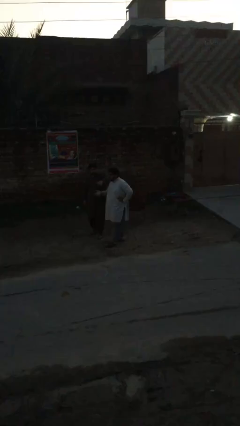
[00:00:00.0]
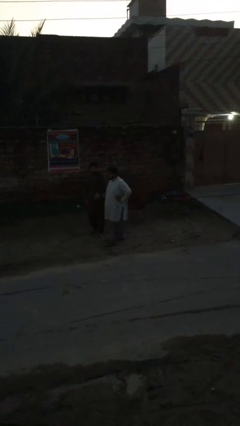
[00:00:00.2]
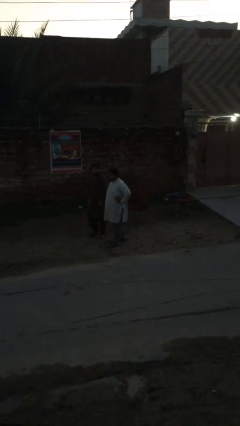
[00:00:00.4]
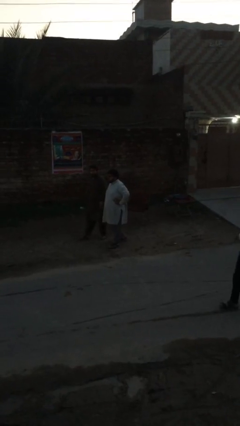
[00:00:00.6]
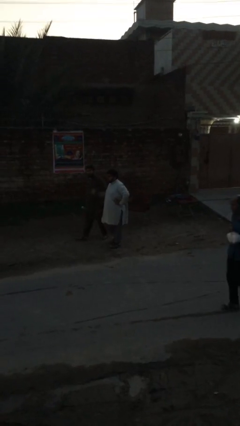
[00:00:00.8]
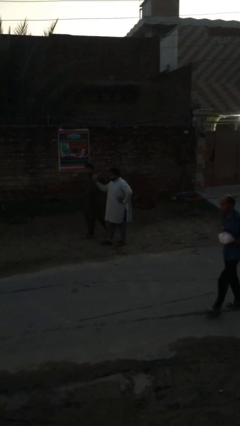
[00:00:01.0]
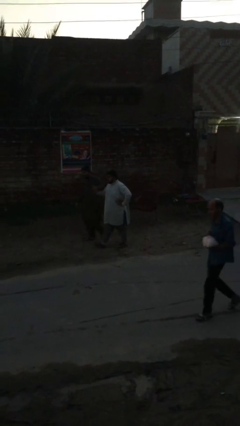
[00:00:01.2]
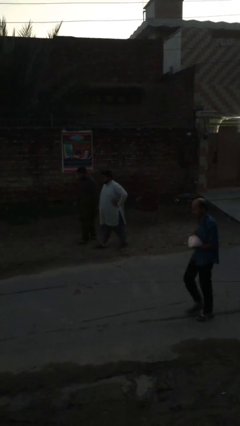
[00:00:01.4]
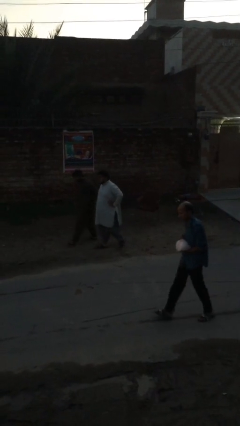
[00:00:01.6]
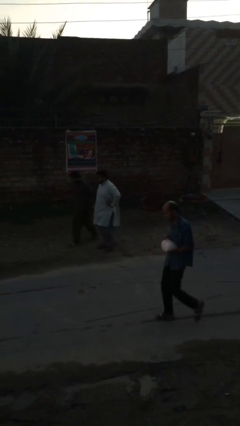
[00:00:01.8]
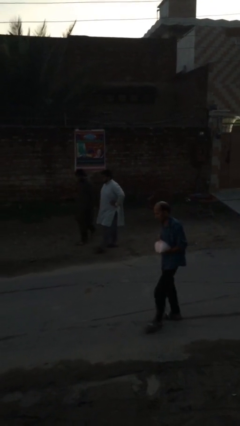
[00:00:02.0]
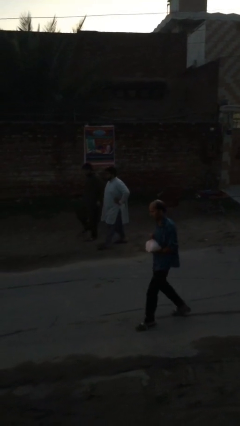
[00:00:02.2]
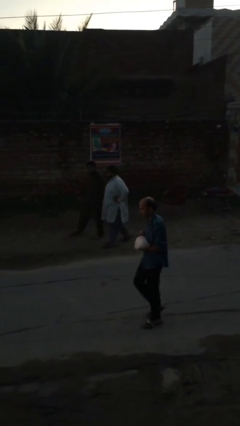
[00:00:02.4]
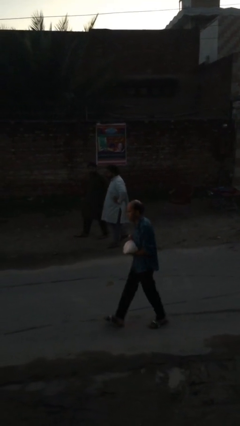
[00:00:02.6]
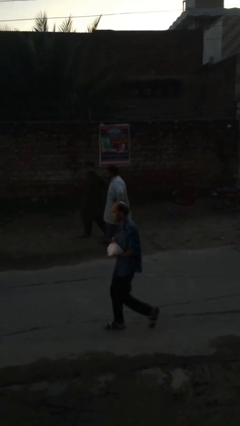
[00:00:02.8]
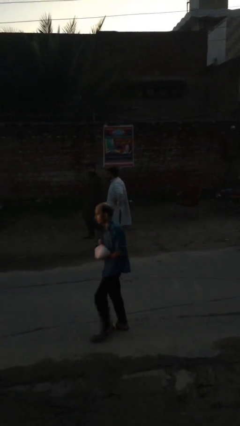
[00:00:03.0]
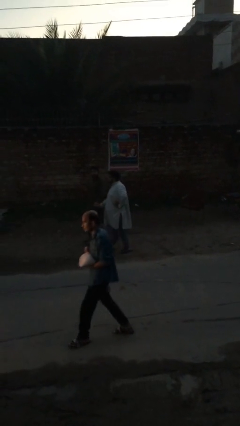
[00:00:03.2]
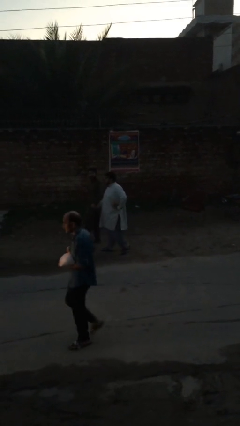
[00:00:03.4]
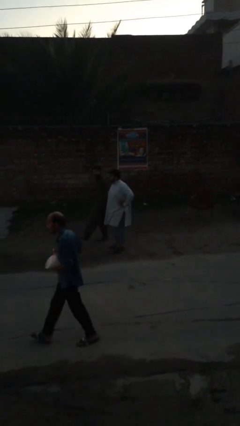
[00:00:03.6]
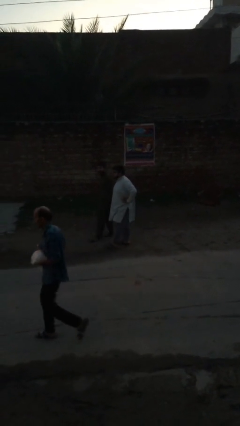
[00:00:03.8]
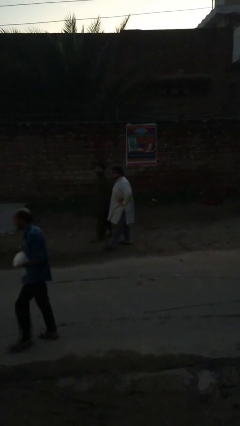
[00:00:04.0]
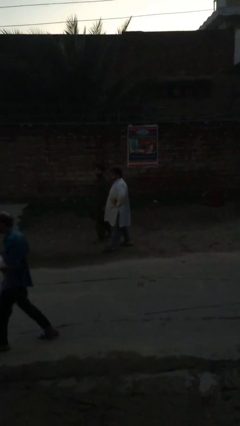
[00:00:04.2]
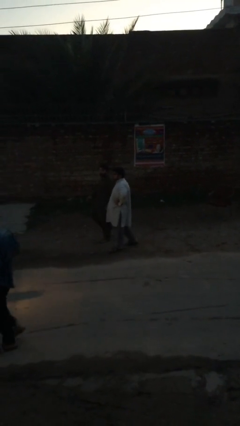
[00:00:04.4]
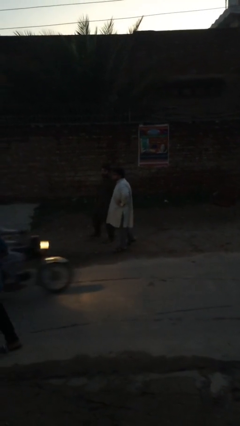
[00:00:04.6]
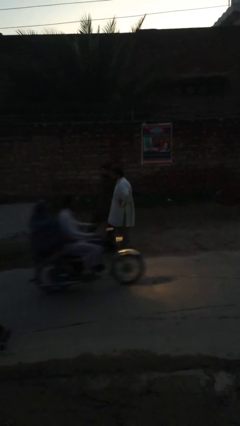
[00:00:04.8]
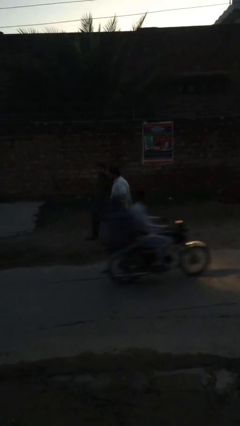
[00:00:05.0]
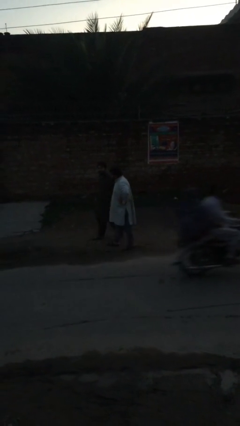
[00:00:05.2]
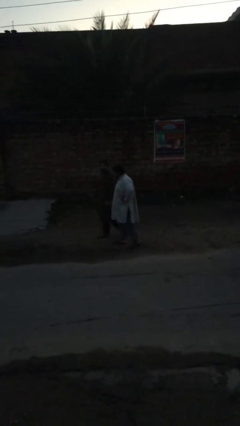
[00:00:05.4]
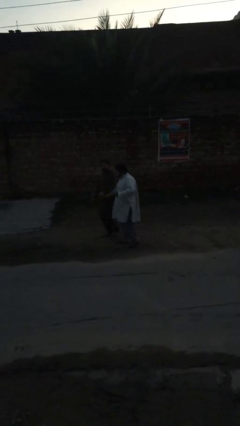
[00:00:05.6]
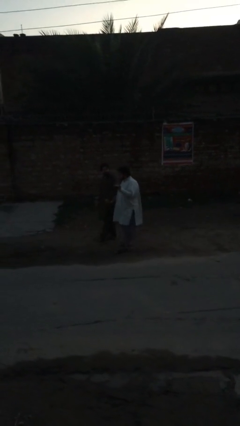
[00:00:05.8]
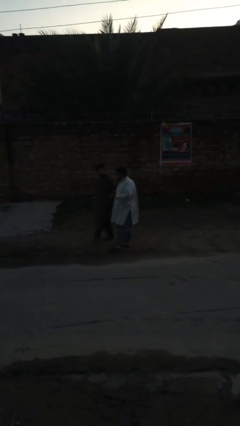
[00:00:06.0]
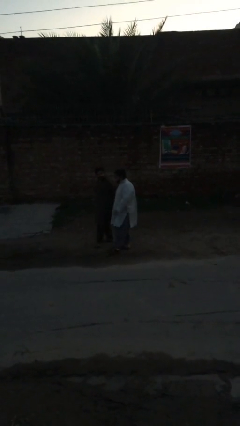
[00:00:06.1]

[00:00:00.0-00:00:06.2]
person holds hand

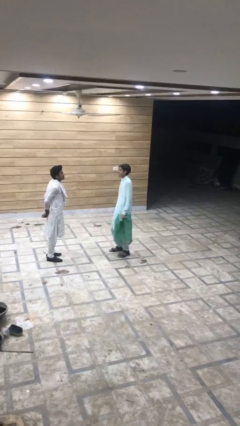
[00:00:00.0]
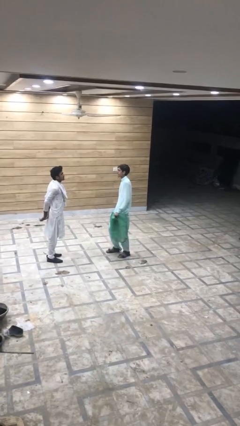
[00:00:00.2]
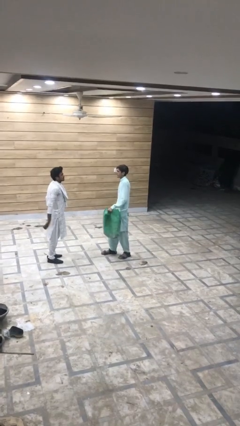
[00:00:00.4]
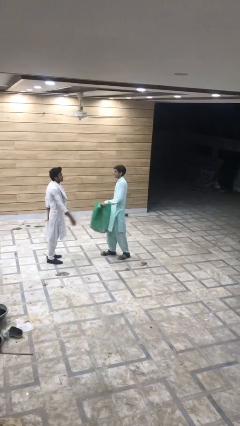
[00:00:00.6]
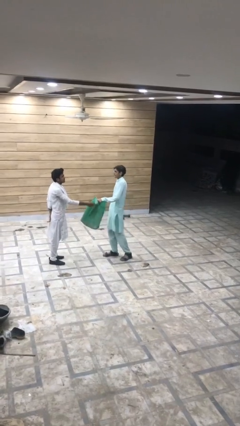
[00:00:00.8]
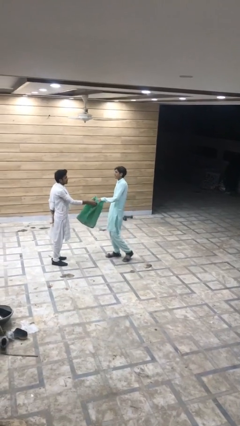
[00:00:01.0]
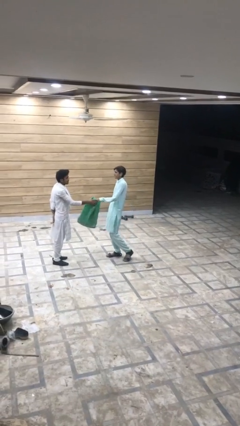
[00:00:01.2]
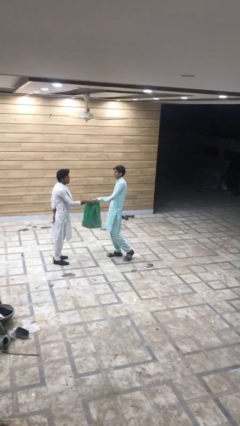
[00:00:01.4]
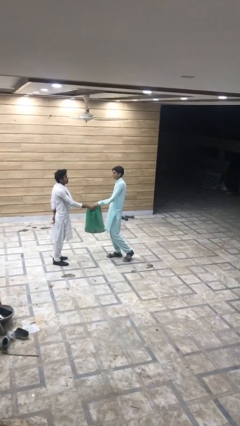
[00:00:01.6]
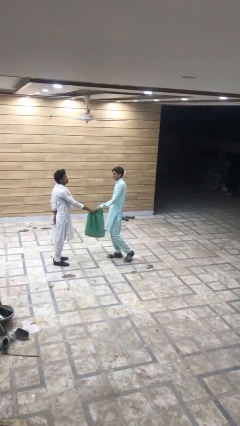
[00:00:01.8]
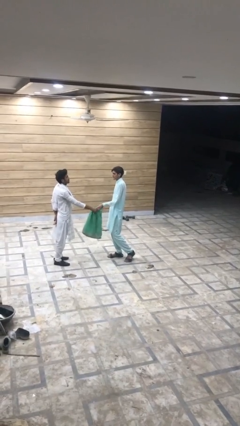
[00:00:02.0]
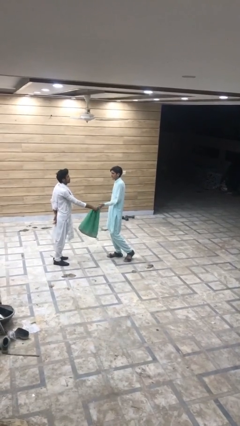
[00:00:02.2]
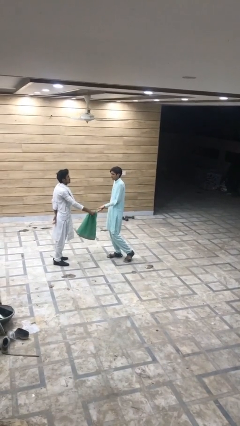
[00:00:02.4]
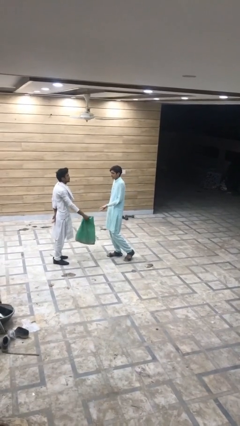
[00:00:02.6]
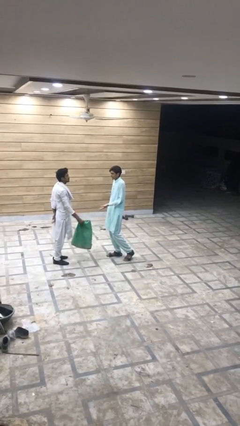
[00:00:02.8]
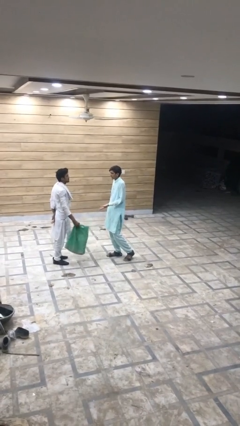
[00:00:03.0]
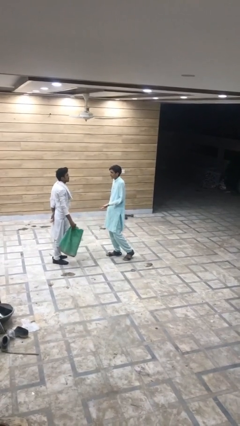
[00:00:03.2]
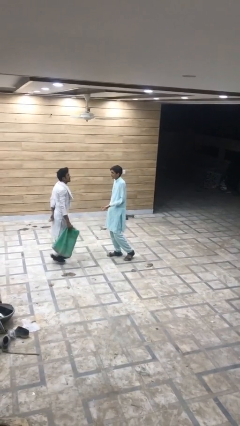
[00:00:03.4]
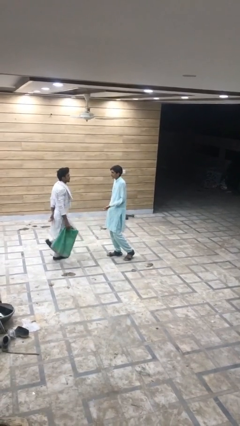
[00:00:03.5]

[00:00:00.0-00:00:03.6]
person transfers object to person

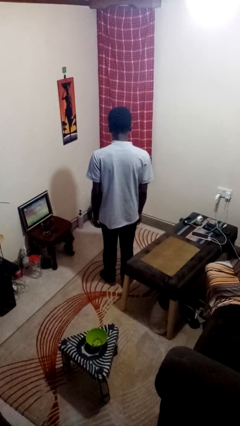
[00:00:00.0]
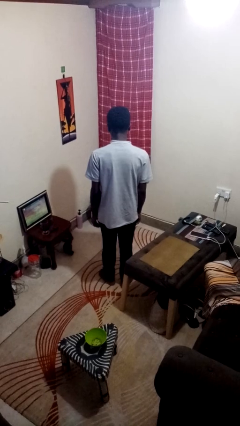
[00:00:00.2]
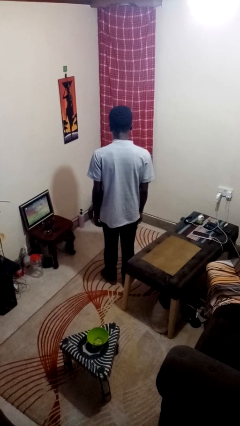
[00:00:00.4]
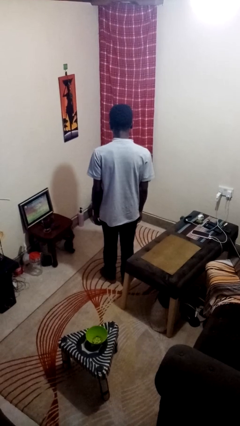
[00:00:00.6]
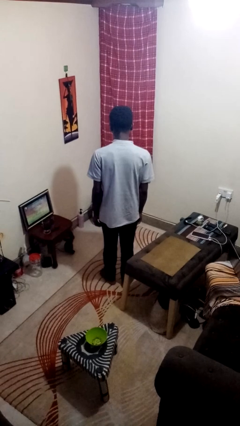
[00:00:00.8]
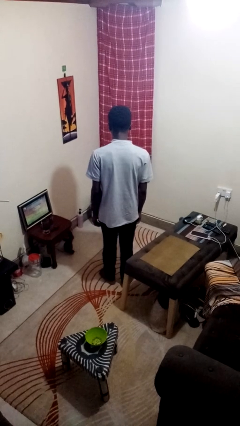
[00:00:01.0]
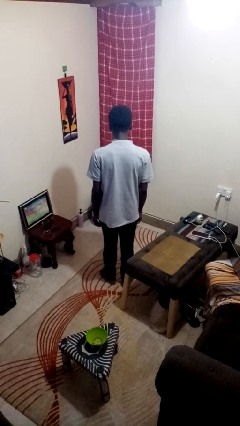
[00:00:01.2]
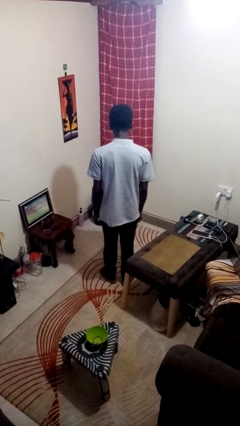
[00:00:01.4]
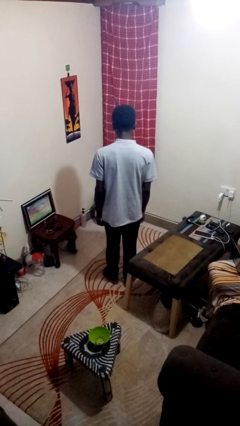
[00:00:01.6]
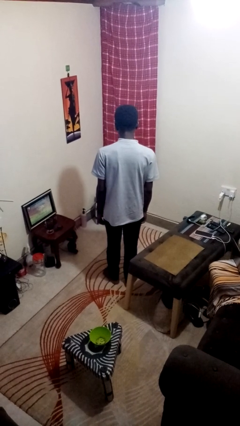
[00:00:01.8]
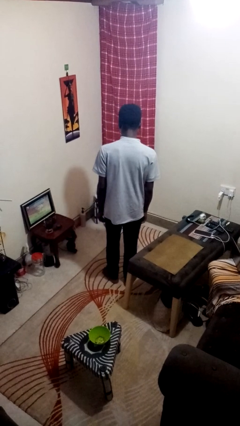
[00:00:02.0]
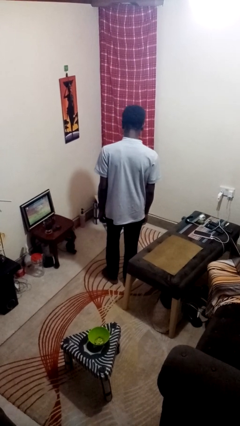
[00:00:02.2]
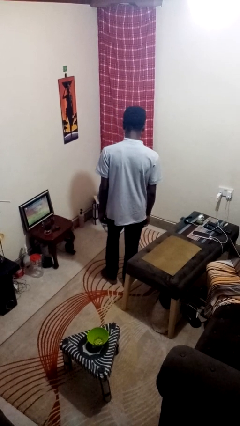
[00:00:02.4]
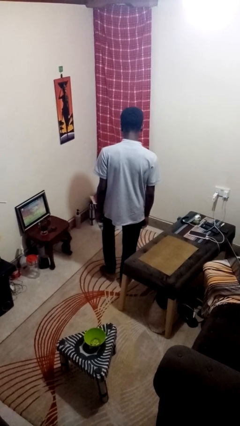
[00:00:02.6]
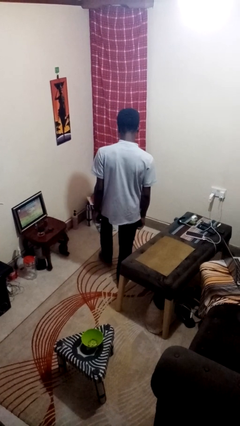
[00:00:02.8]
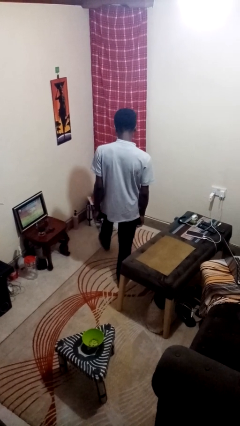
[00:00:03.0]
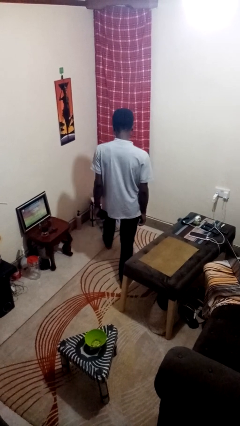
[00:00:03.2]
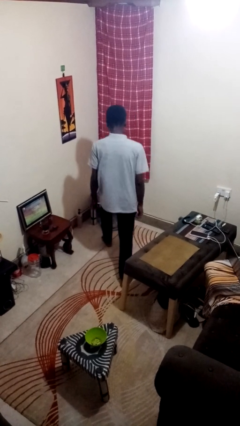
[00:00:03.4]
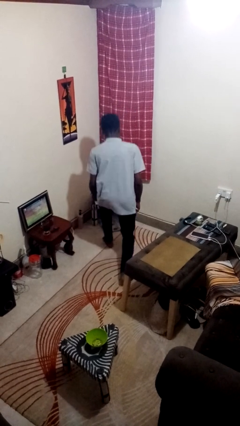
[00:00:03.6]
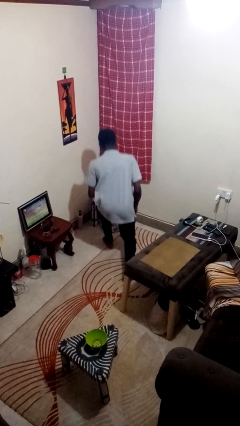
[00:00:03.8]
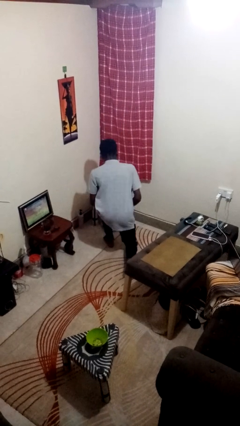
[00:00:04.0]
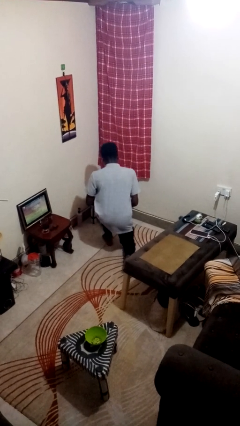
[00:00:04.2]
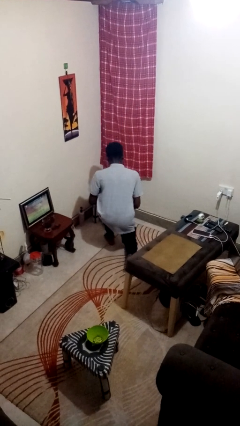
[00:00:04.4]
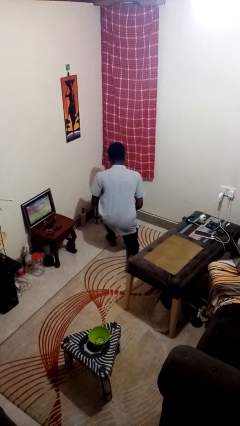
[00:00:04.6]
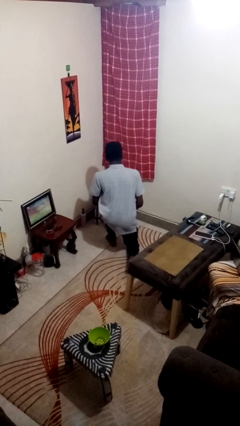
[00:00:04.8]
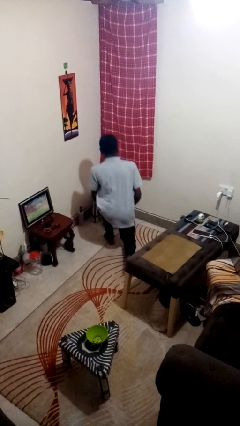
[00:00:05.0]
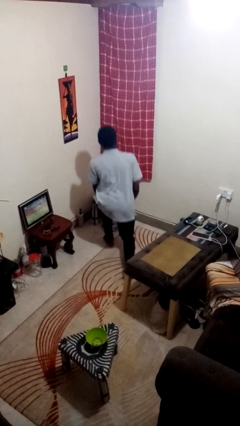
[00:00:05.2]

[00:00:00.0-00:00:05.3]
person exercises with lunges

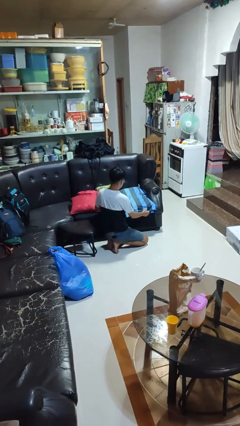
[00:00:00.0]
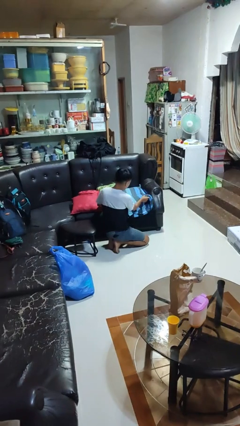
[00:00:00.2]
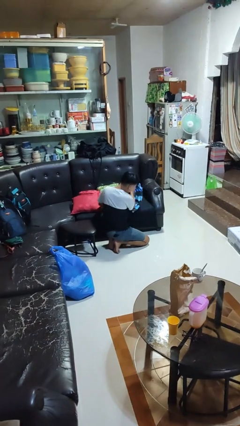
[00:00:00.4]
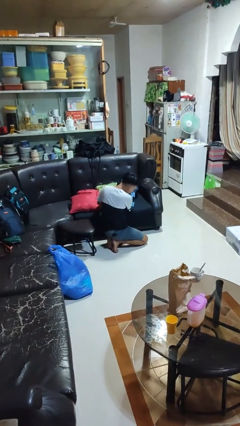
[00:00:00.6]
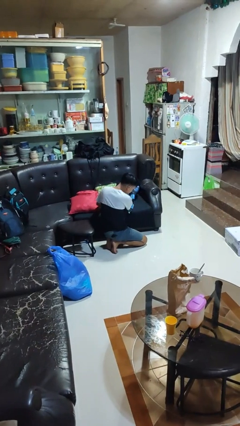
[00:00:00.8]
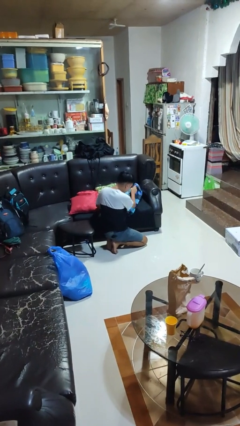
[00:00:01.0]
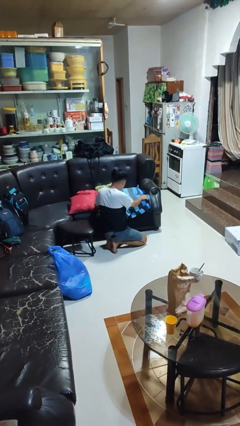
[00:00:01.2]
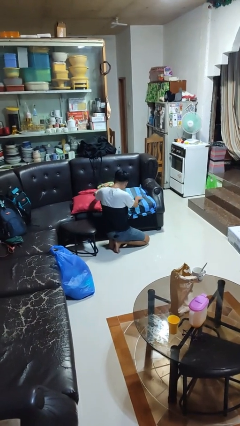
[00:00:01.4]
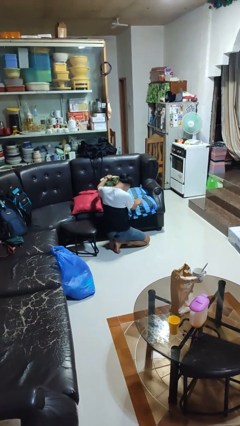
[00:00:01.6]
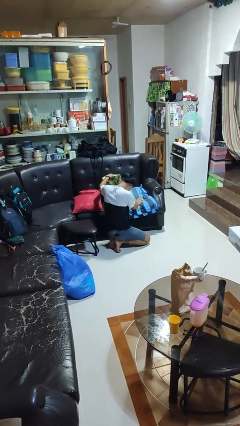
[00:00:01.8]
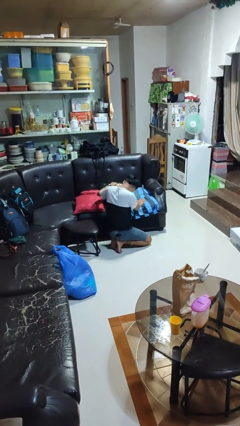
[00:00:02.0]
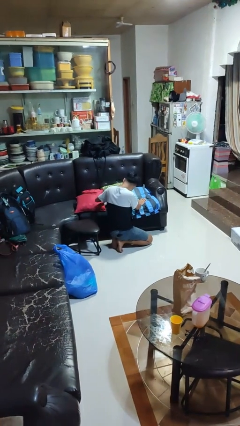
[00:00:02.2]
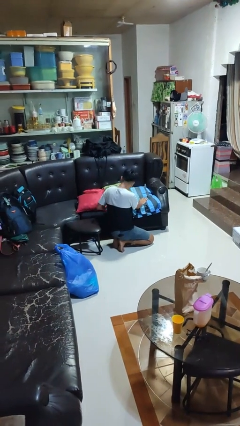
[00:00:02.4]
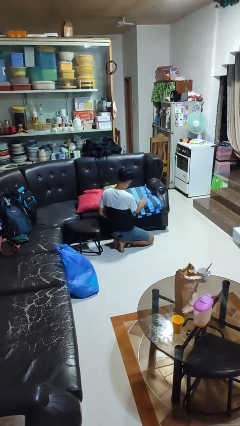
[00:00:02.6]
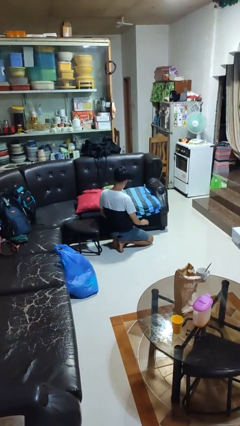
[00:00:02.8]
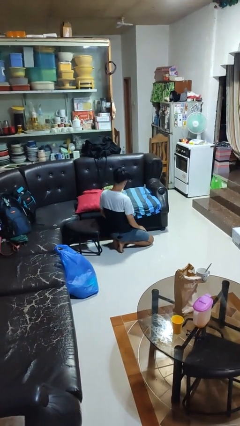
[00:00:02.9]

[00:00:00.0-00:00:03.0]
person searches in couch
